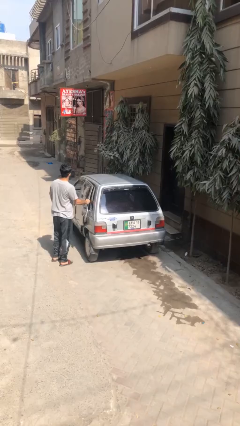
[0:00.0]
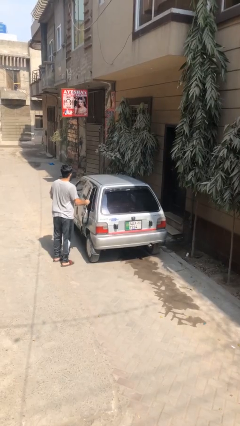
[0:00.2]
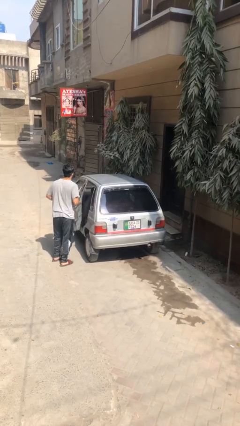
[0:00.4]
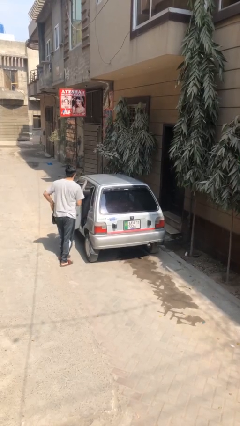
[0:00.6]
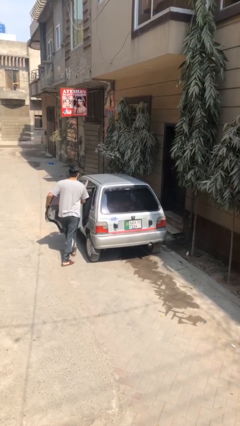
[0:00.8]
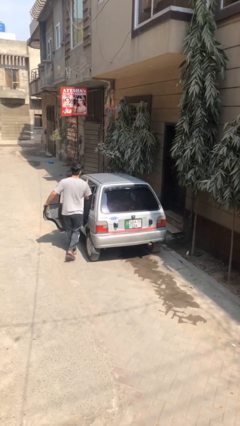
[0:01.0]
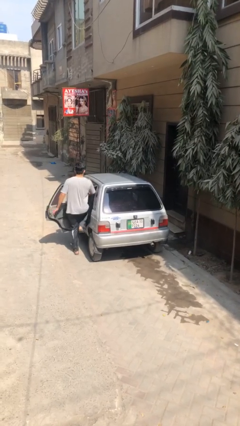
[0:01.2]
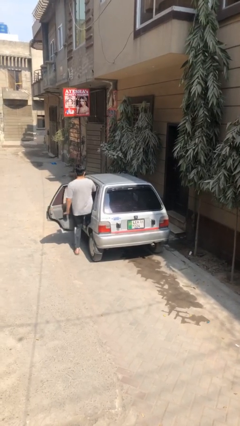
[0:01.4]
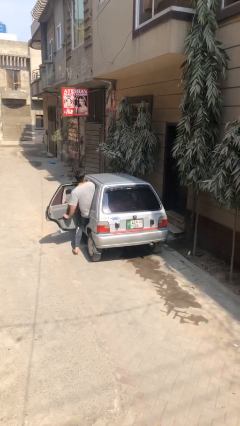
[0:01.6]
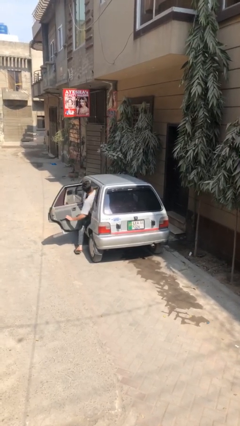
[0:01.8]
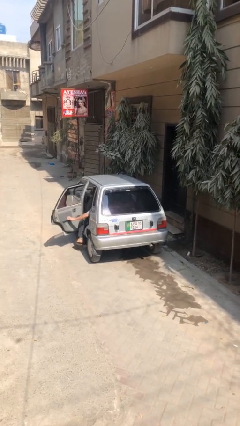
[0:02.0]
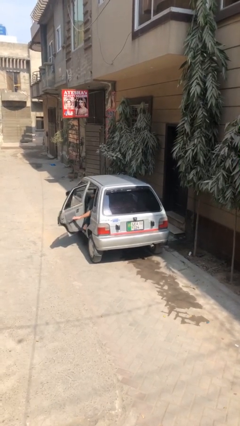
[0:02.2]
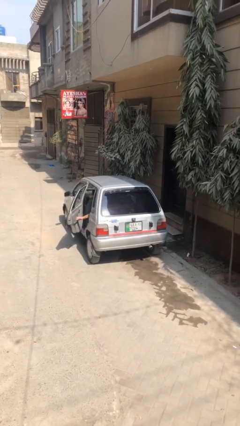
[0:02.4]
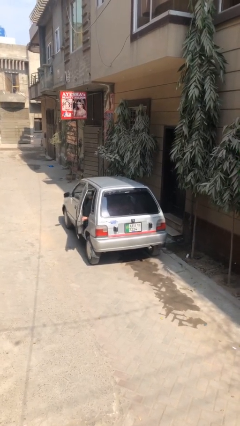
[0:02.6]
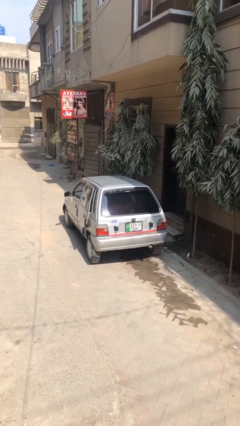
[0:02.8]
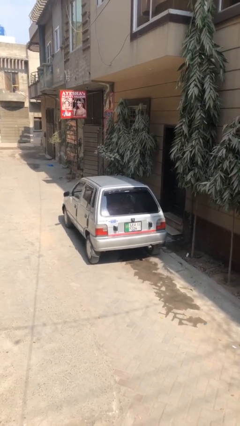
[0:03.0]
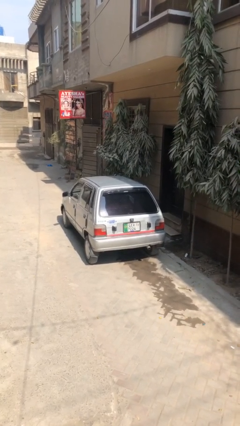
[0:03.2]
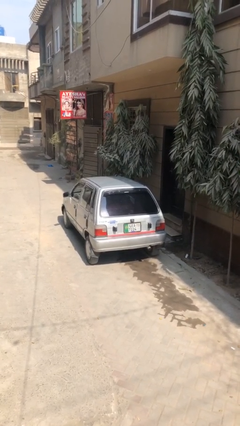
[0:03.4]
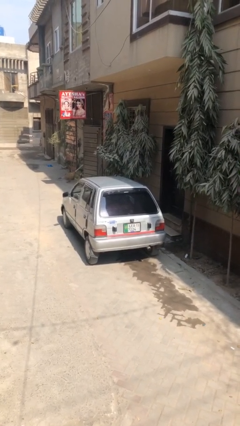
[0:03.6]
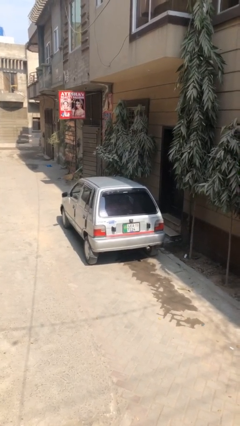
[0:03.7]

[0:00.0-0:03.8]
car picks up person

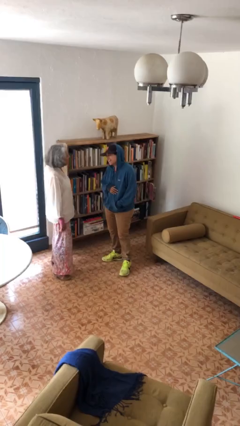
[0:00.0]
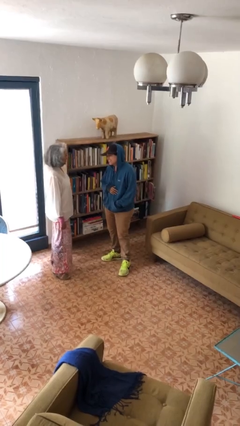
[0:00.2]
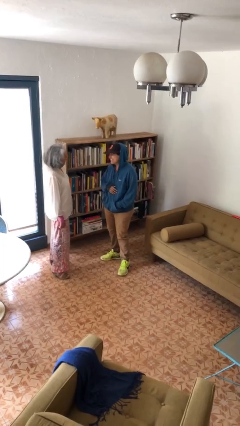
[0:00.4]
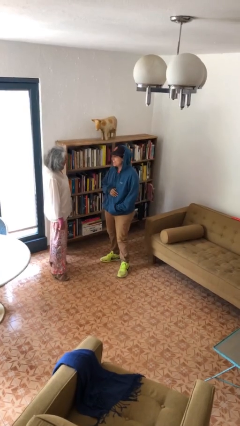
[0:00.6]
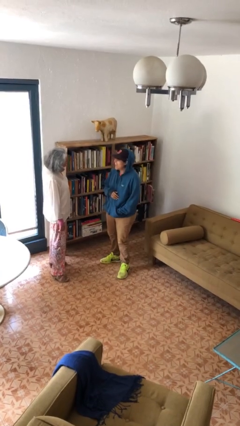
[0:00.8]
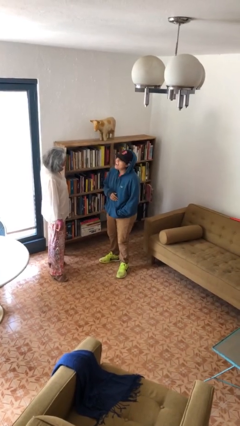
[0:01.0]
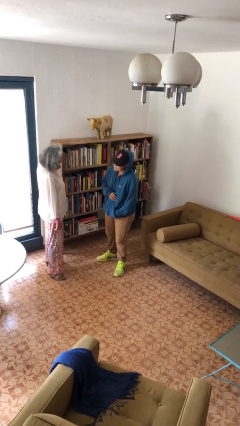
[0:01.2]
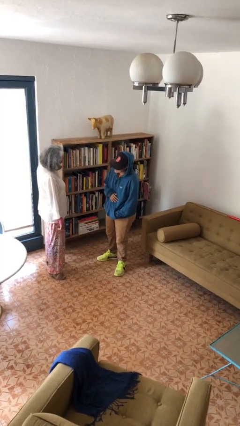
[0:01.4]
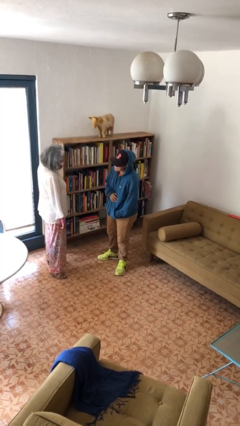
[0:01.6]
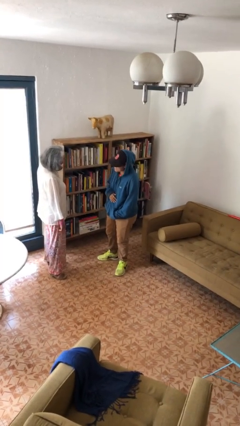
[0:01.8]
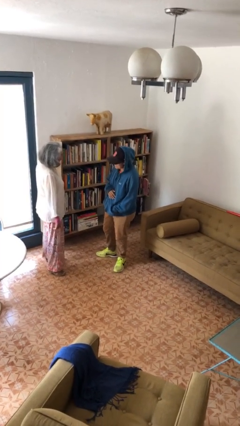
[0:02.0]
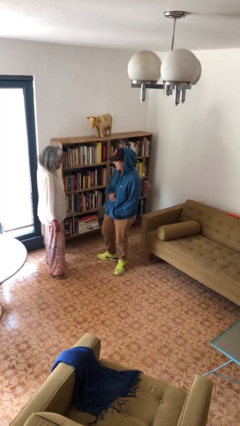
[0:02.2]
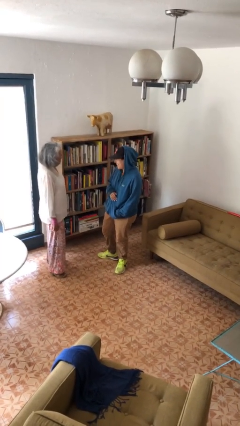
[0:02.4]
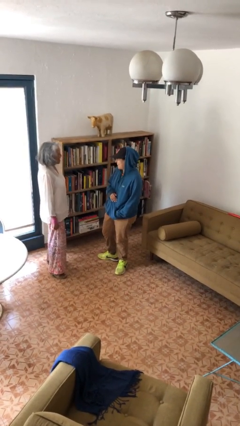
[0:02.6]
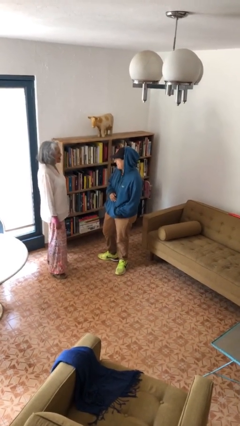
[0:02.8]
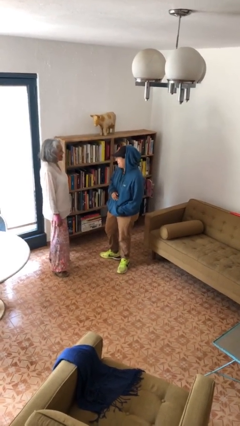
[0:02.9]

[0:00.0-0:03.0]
person laughs with person

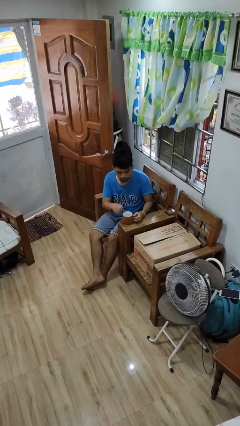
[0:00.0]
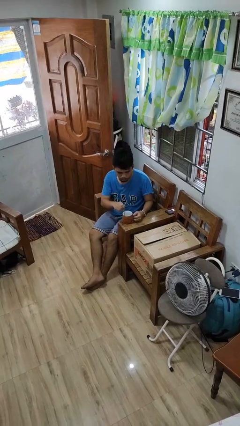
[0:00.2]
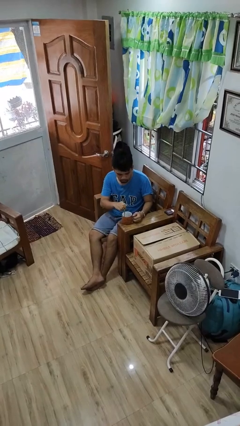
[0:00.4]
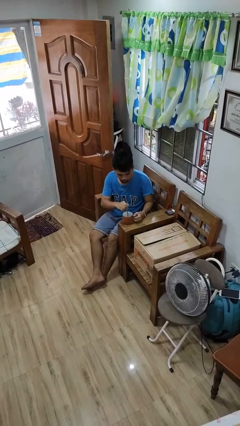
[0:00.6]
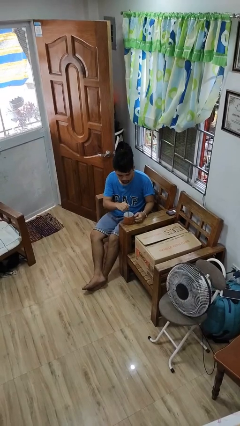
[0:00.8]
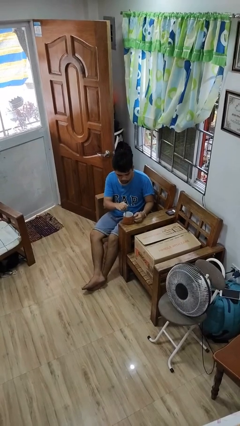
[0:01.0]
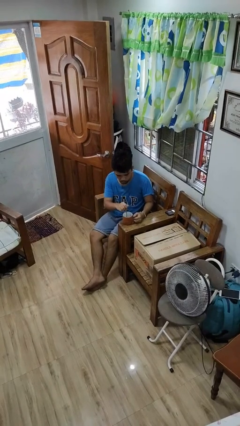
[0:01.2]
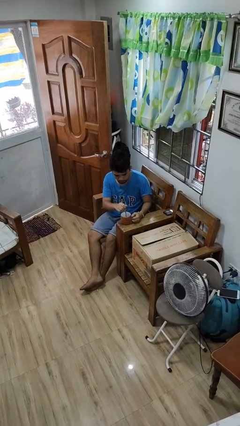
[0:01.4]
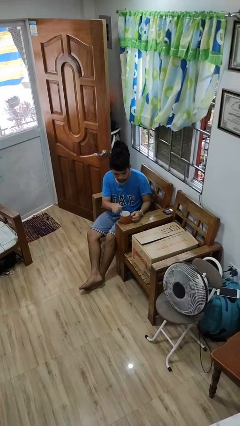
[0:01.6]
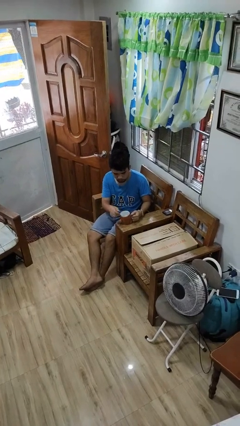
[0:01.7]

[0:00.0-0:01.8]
person stirs mug

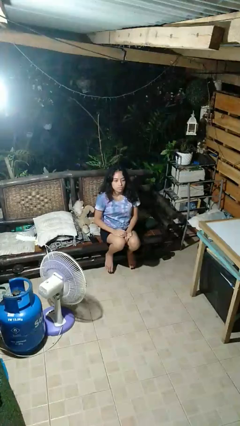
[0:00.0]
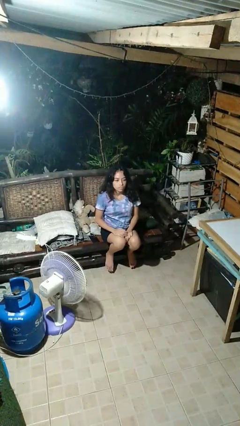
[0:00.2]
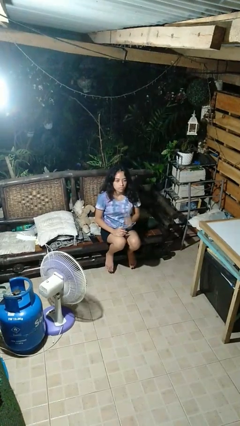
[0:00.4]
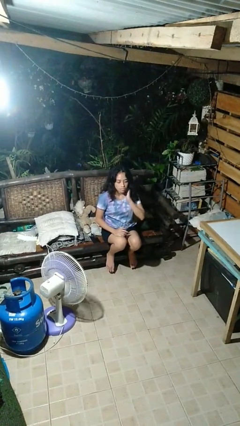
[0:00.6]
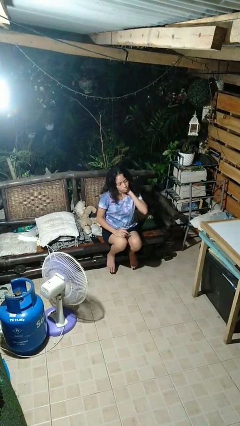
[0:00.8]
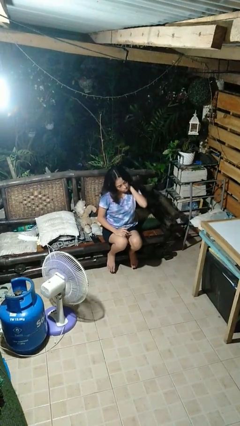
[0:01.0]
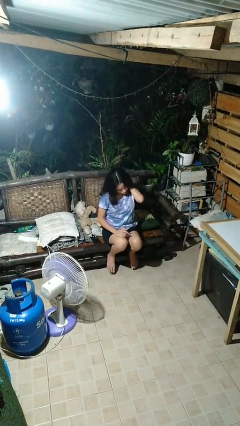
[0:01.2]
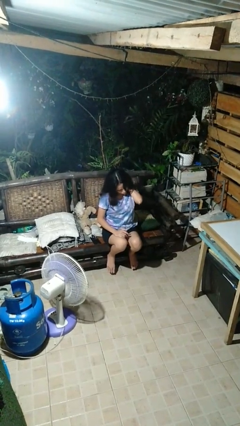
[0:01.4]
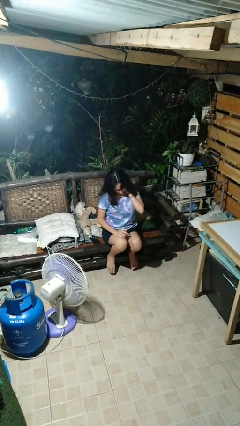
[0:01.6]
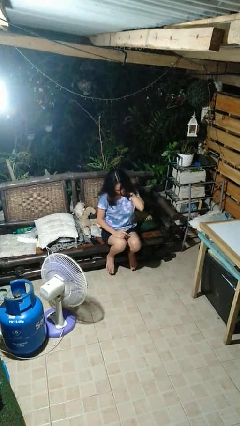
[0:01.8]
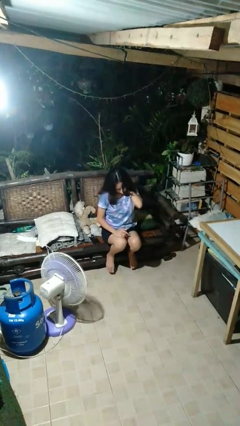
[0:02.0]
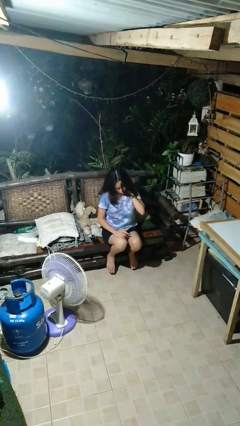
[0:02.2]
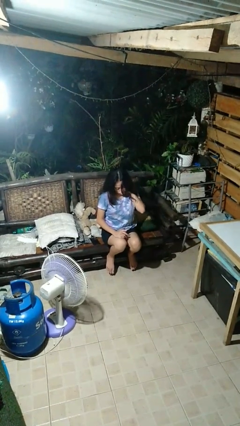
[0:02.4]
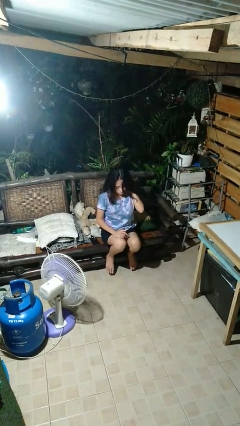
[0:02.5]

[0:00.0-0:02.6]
person rubs neck

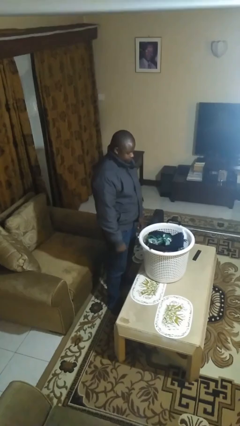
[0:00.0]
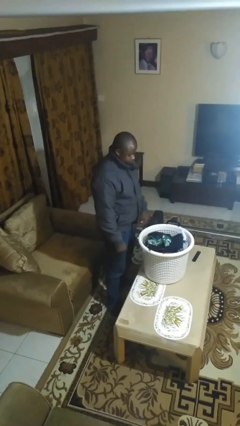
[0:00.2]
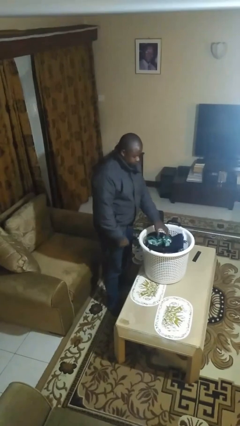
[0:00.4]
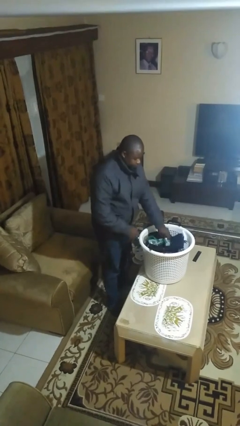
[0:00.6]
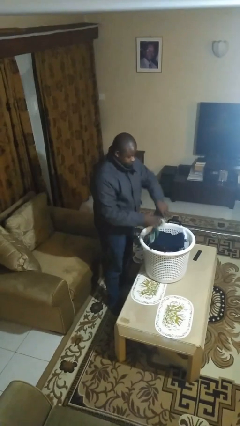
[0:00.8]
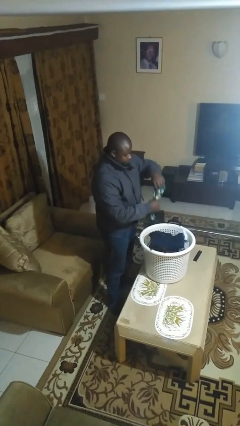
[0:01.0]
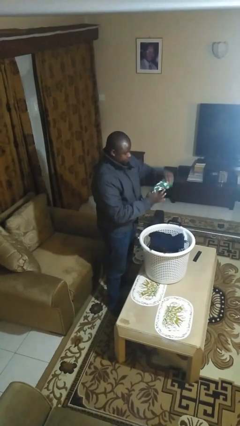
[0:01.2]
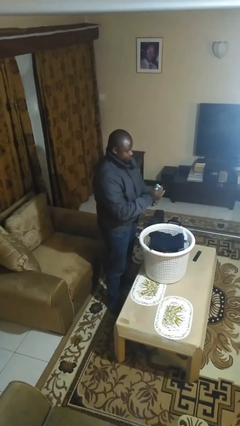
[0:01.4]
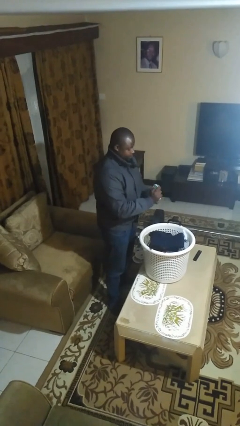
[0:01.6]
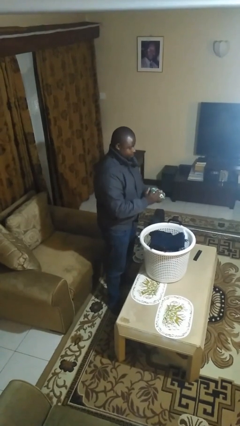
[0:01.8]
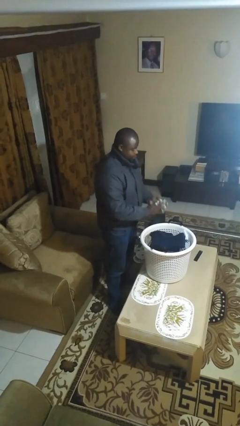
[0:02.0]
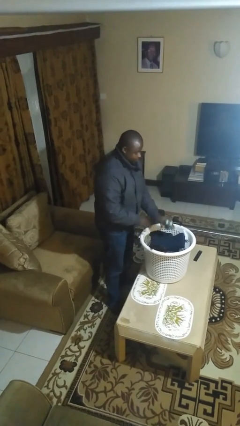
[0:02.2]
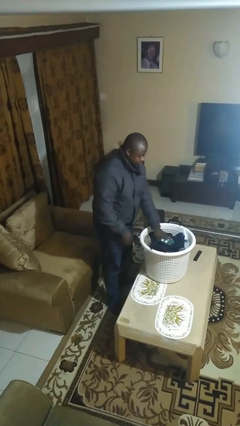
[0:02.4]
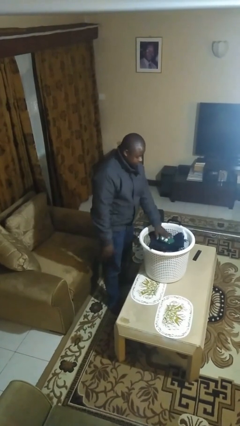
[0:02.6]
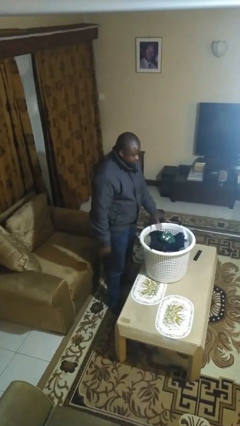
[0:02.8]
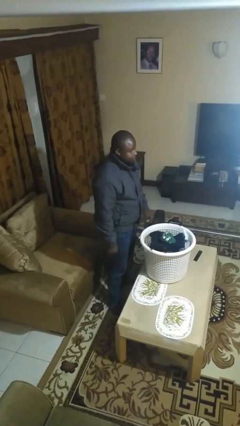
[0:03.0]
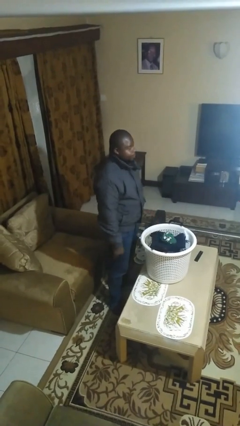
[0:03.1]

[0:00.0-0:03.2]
person folds socks

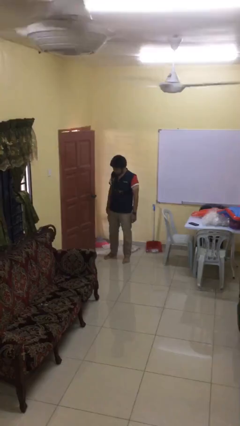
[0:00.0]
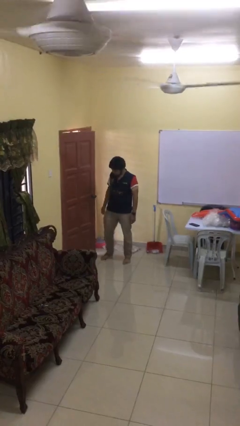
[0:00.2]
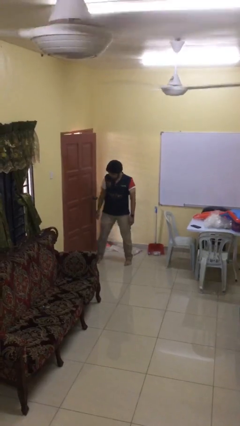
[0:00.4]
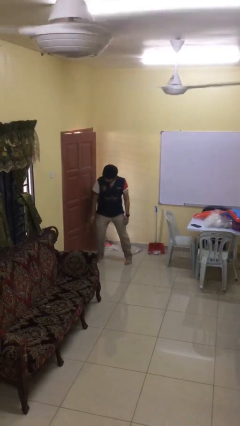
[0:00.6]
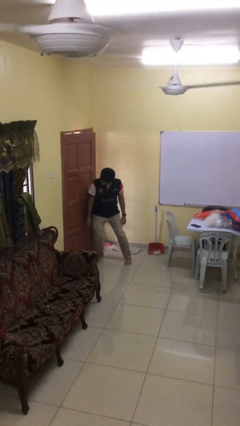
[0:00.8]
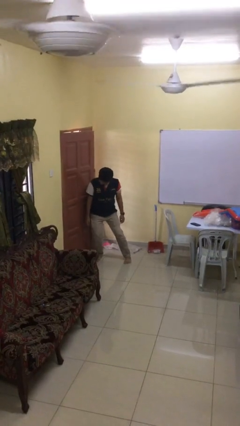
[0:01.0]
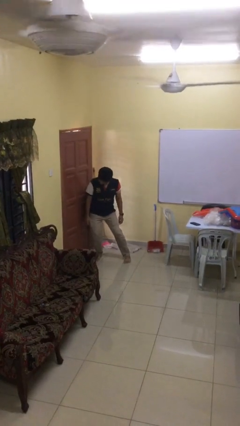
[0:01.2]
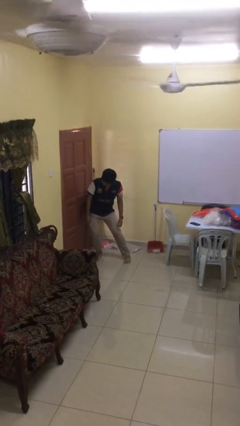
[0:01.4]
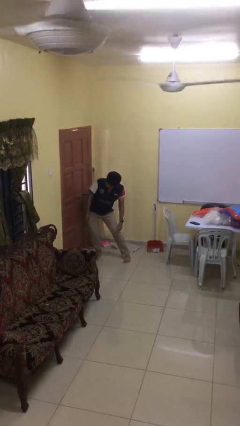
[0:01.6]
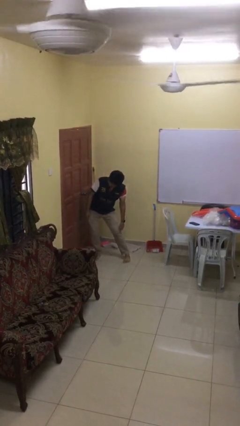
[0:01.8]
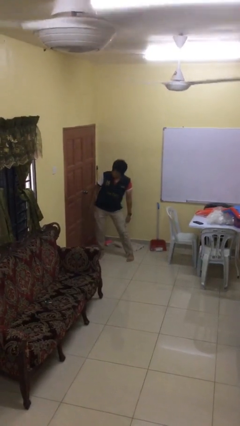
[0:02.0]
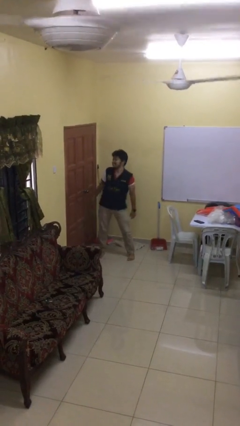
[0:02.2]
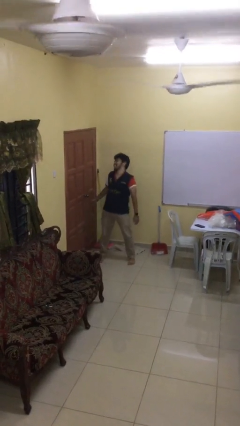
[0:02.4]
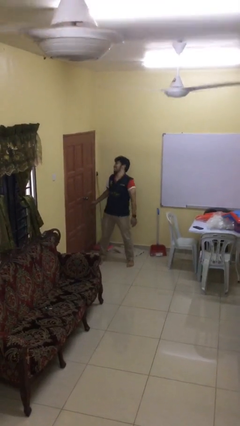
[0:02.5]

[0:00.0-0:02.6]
person closes door with hip
